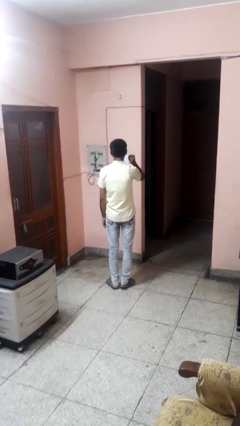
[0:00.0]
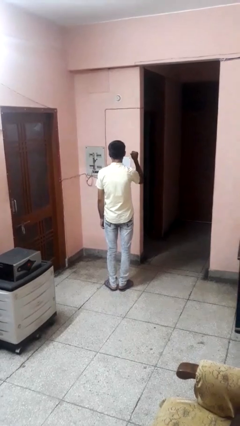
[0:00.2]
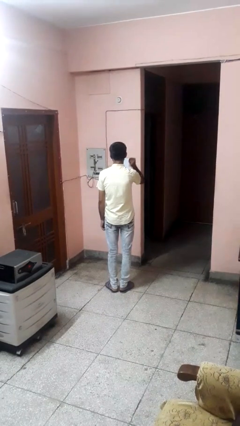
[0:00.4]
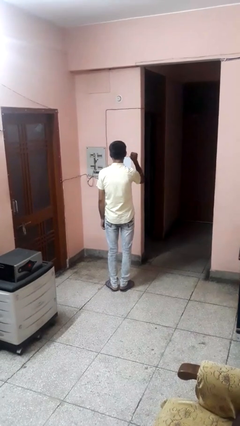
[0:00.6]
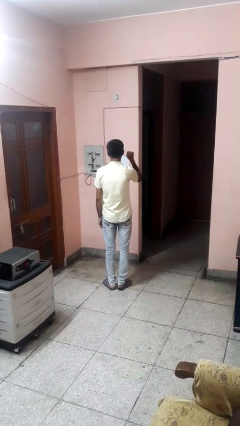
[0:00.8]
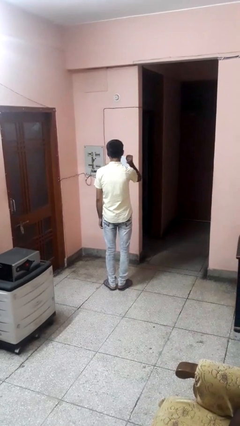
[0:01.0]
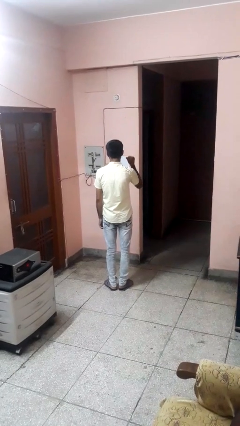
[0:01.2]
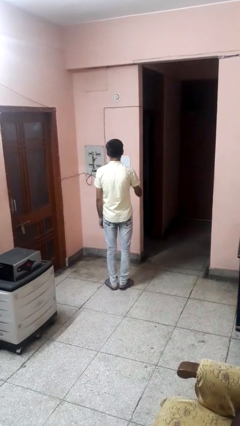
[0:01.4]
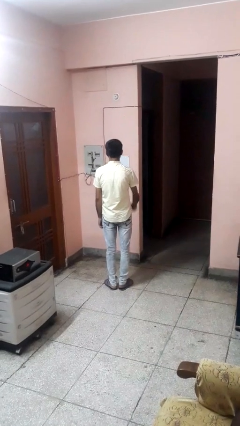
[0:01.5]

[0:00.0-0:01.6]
person gestures behind me

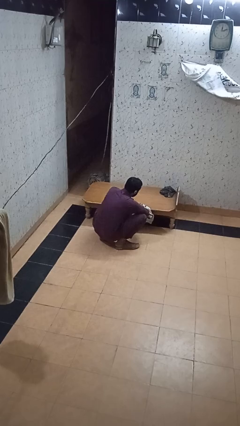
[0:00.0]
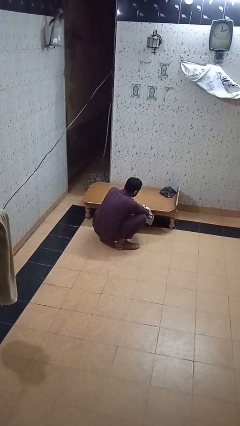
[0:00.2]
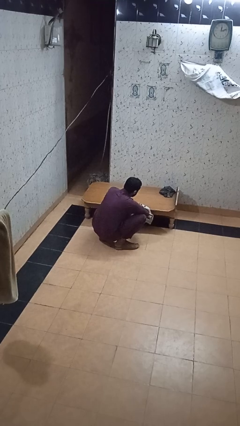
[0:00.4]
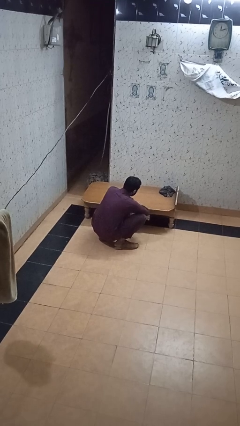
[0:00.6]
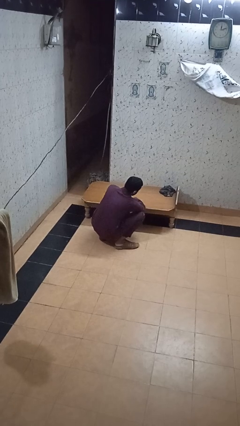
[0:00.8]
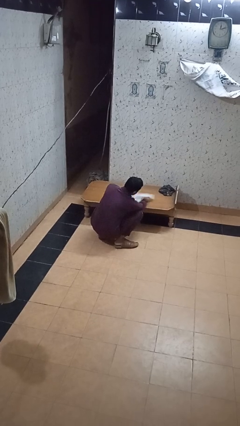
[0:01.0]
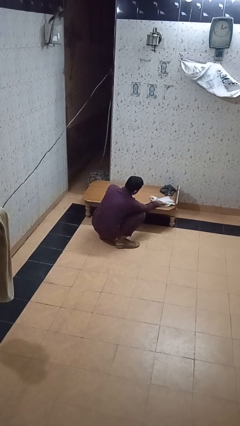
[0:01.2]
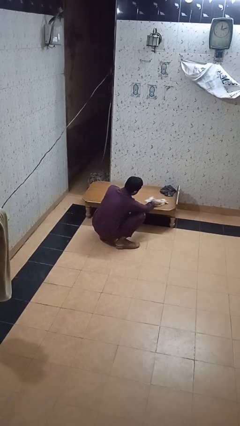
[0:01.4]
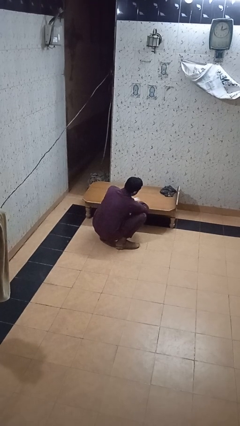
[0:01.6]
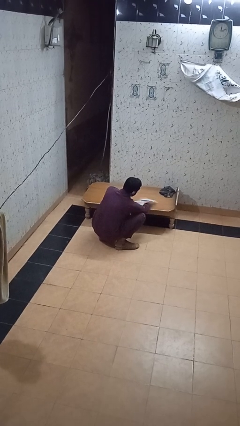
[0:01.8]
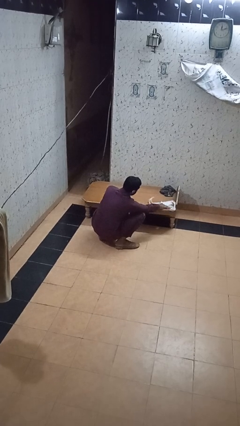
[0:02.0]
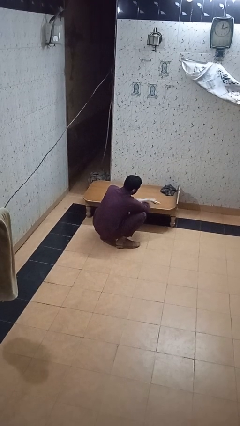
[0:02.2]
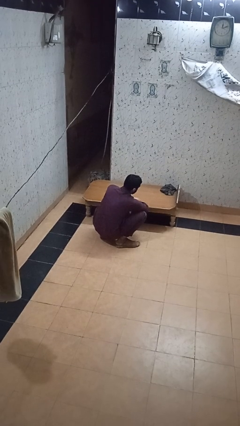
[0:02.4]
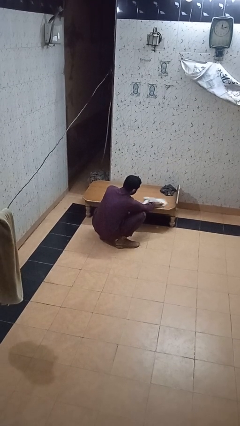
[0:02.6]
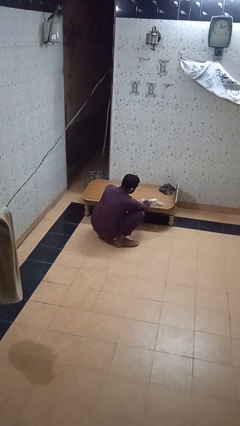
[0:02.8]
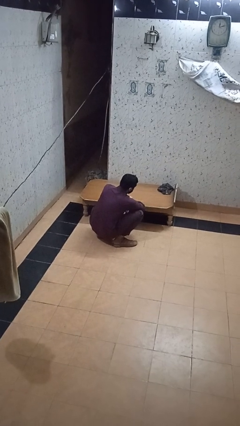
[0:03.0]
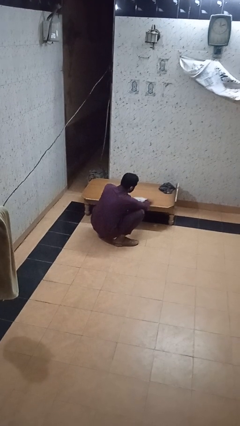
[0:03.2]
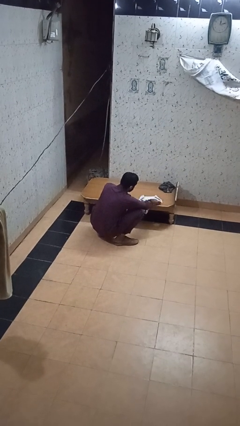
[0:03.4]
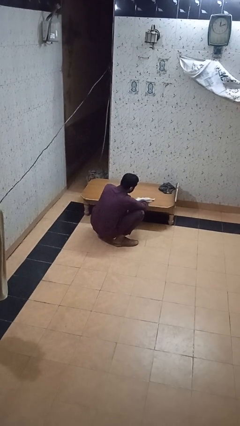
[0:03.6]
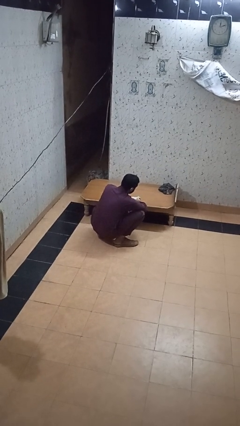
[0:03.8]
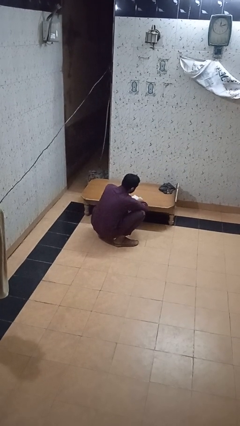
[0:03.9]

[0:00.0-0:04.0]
person vacuums carpet

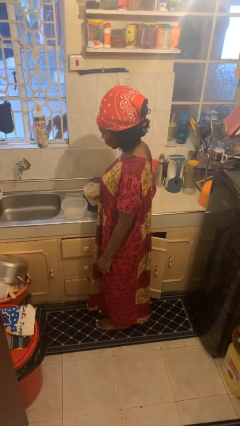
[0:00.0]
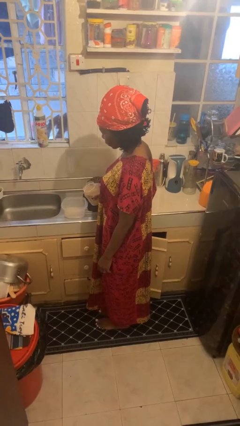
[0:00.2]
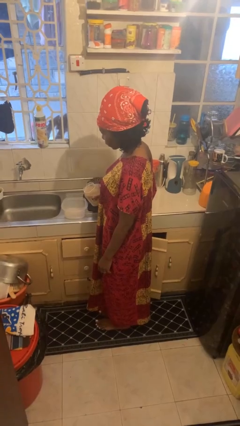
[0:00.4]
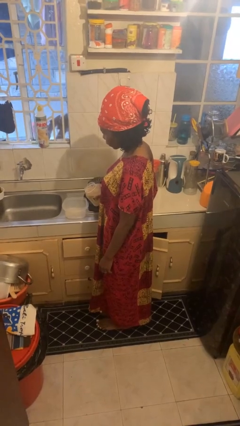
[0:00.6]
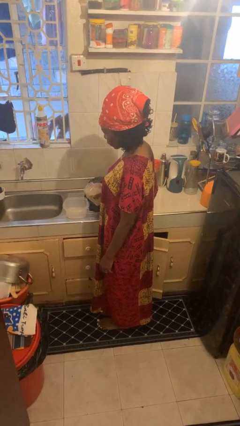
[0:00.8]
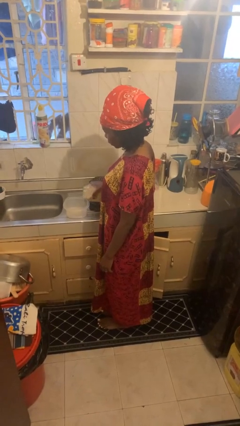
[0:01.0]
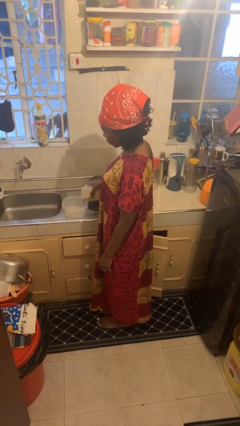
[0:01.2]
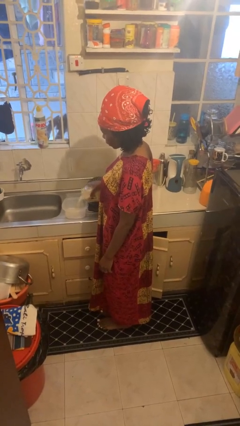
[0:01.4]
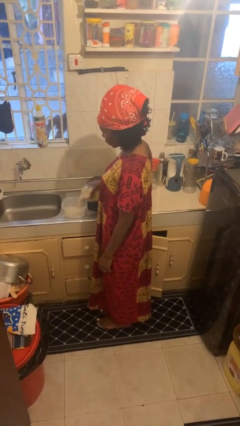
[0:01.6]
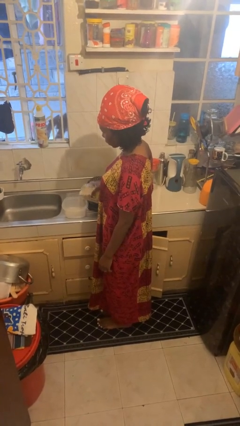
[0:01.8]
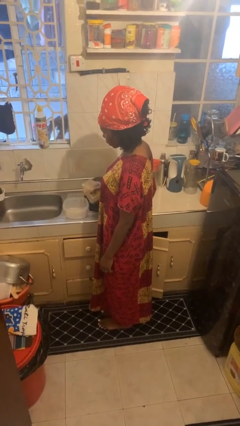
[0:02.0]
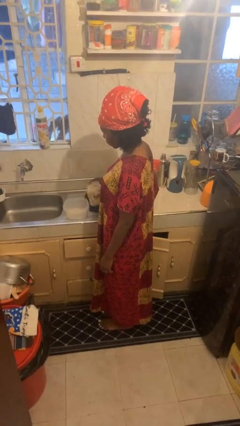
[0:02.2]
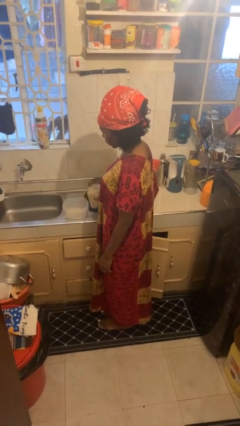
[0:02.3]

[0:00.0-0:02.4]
person pours into bowl

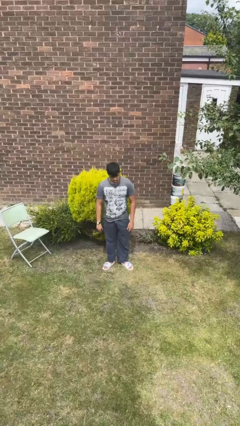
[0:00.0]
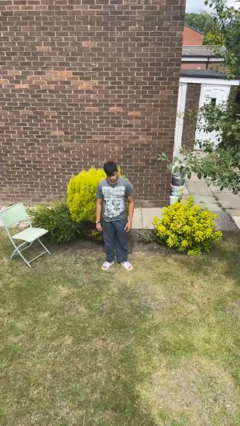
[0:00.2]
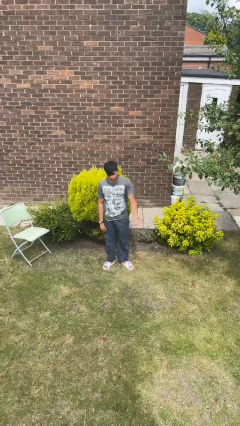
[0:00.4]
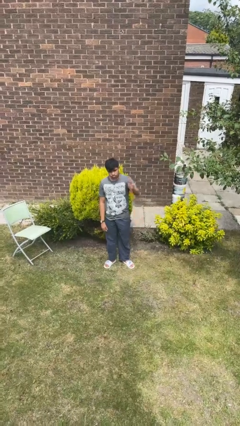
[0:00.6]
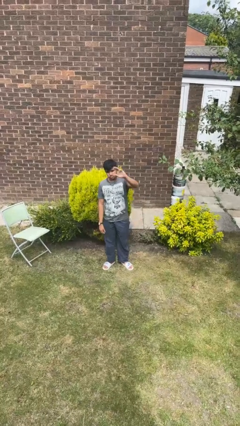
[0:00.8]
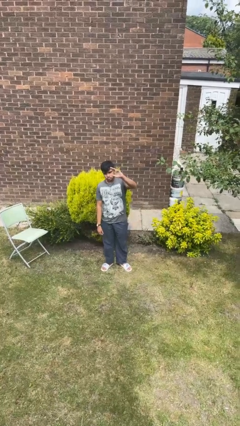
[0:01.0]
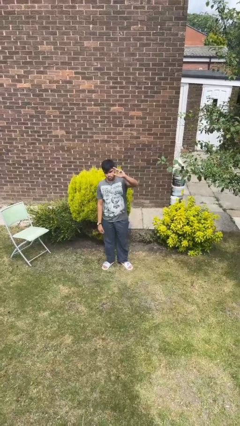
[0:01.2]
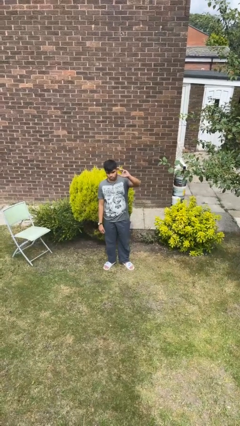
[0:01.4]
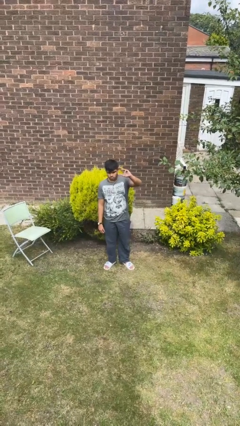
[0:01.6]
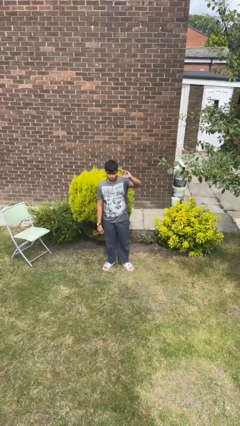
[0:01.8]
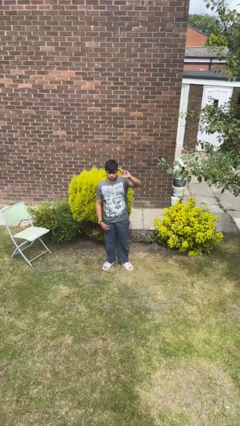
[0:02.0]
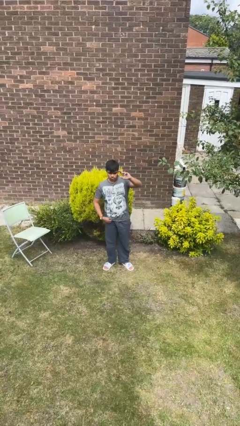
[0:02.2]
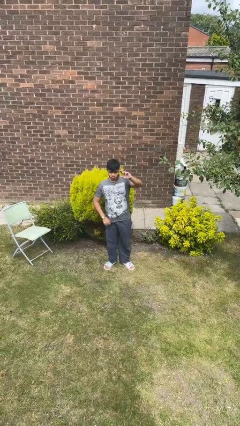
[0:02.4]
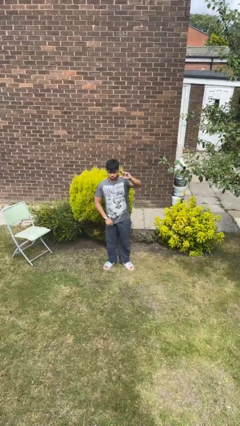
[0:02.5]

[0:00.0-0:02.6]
person gestures raise hand

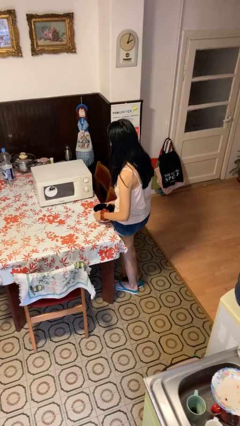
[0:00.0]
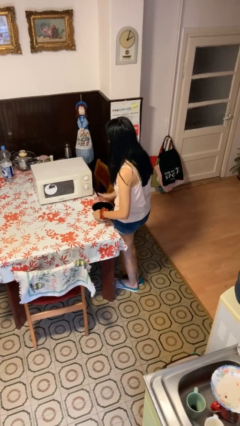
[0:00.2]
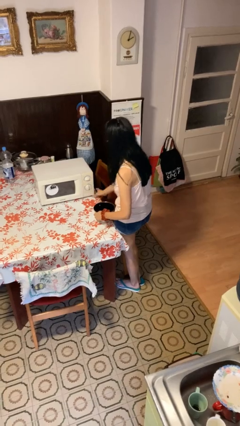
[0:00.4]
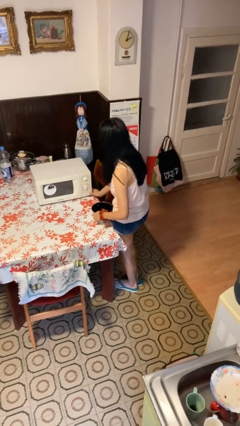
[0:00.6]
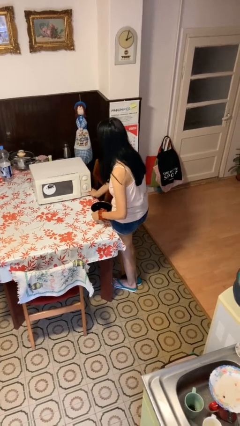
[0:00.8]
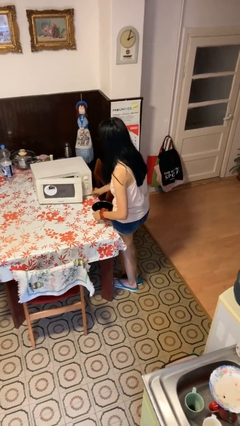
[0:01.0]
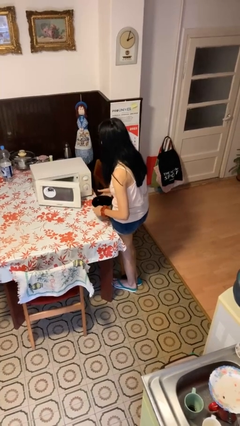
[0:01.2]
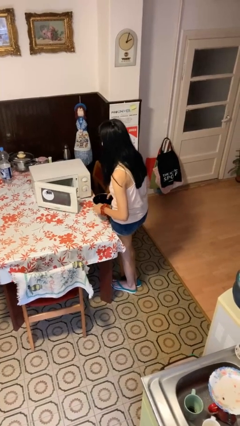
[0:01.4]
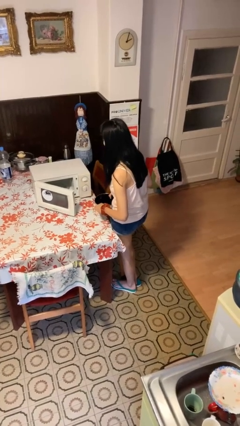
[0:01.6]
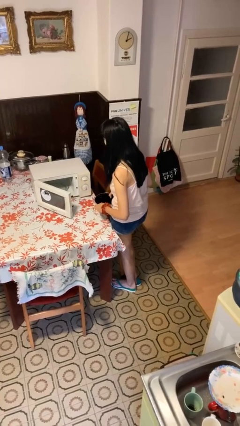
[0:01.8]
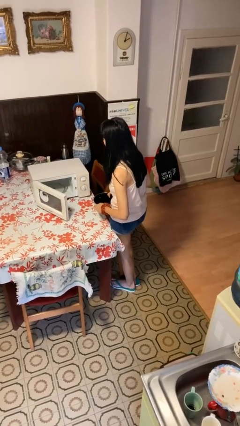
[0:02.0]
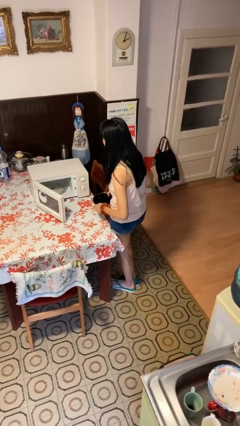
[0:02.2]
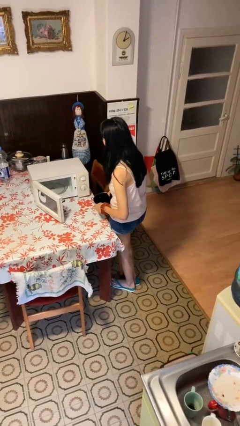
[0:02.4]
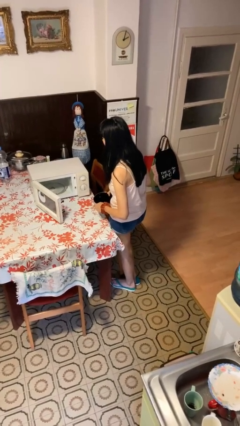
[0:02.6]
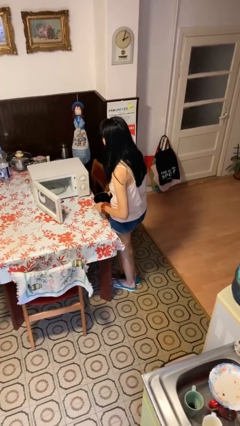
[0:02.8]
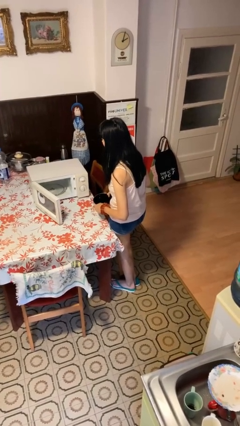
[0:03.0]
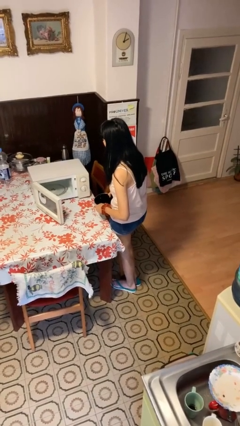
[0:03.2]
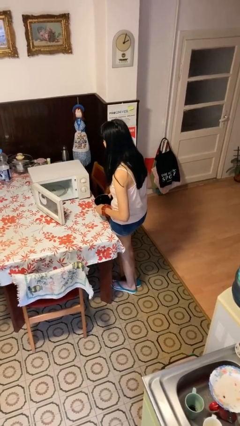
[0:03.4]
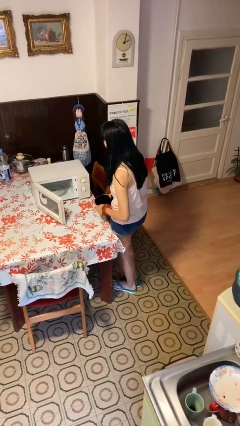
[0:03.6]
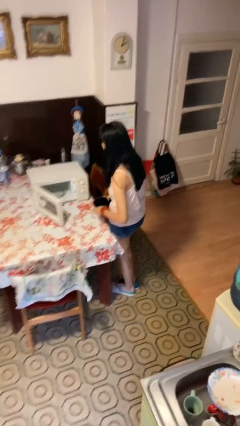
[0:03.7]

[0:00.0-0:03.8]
person opens microwave

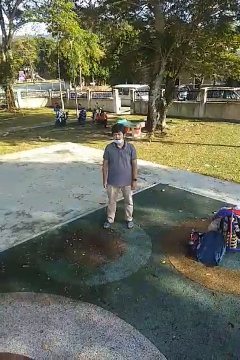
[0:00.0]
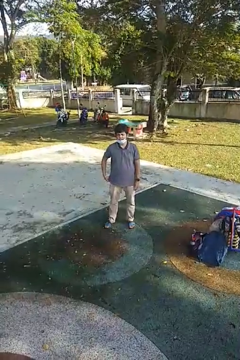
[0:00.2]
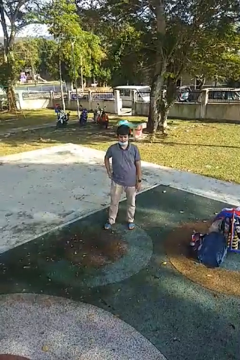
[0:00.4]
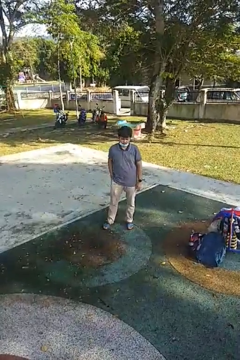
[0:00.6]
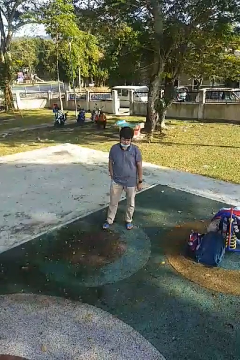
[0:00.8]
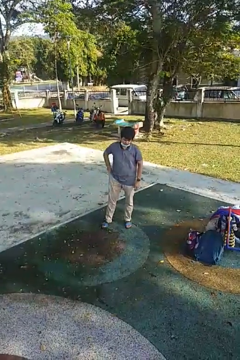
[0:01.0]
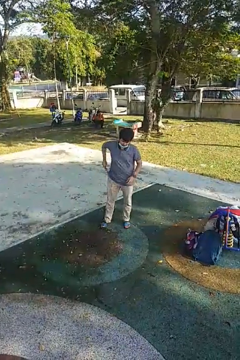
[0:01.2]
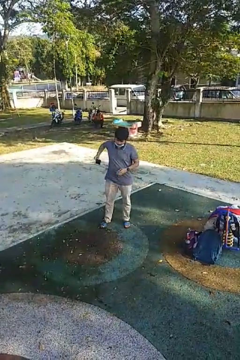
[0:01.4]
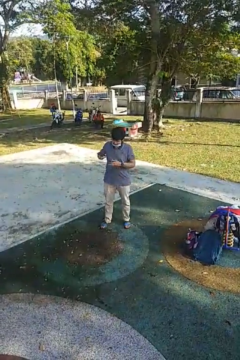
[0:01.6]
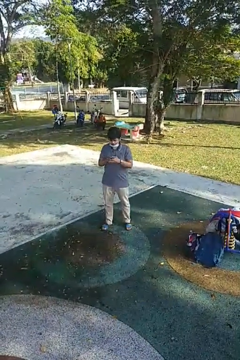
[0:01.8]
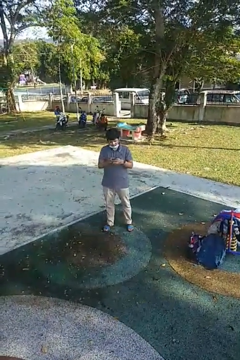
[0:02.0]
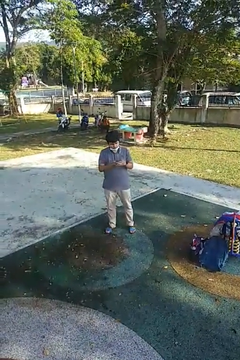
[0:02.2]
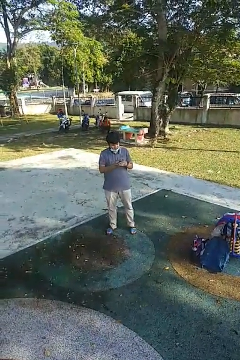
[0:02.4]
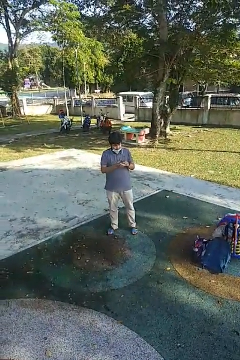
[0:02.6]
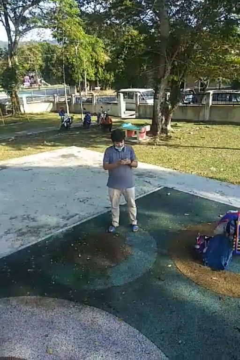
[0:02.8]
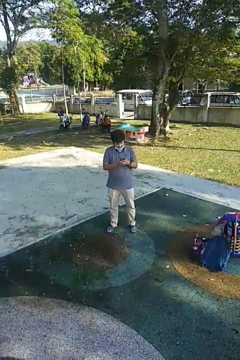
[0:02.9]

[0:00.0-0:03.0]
person takes phone from pocket

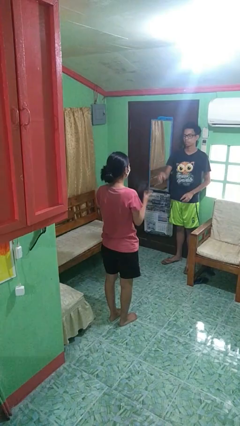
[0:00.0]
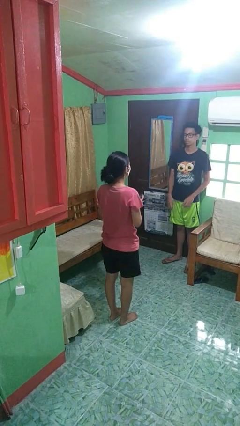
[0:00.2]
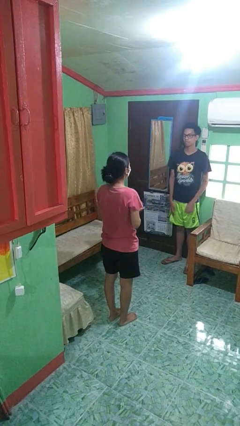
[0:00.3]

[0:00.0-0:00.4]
person catches object from person
